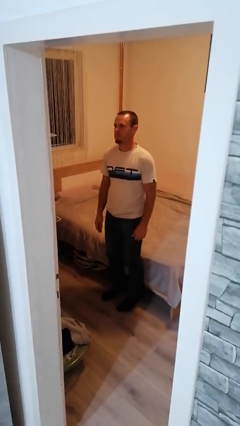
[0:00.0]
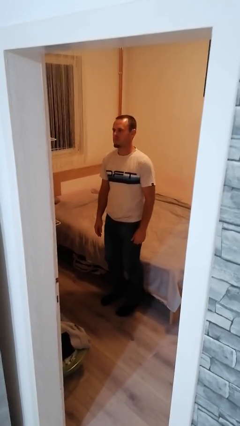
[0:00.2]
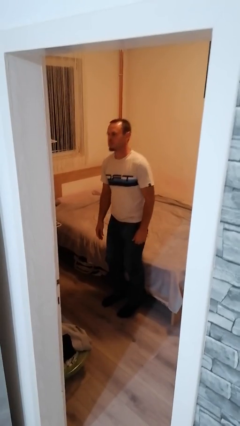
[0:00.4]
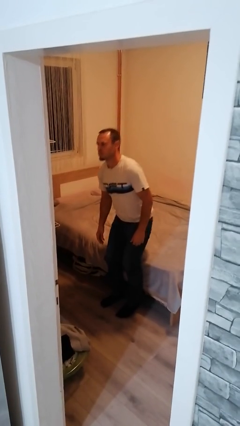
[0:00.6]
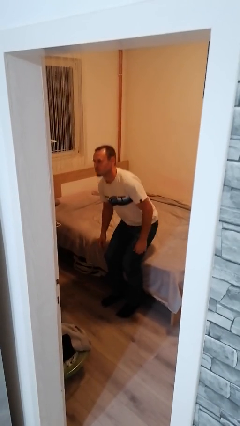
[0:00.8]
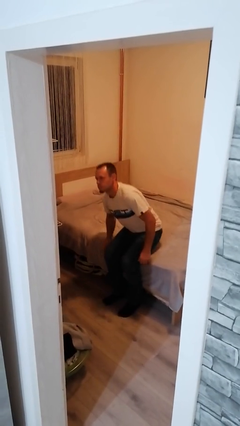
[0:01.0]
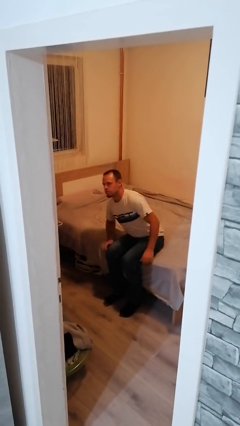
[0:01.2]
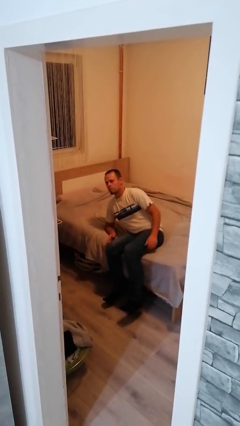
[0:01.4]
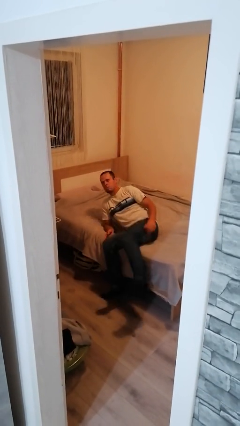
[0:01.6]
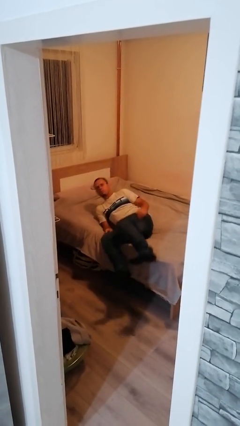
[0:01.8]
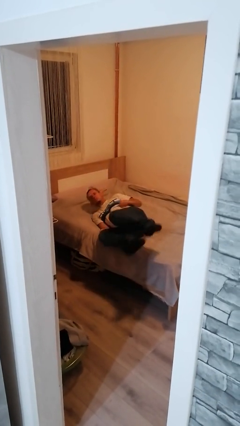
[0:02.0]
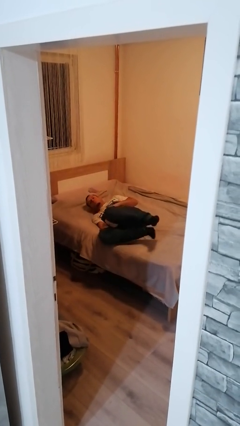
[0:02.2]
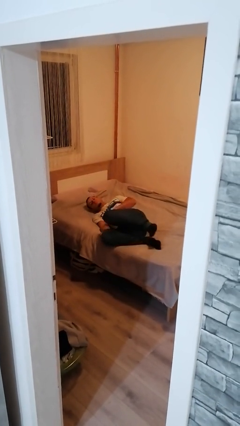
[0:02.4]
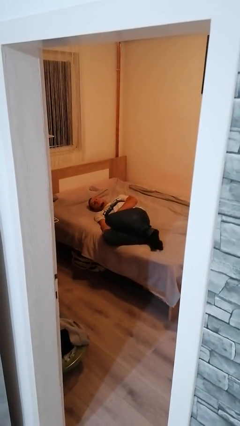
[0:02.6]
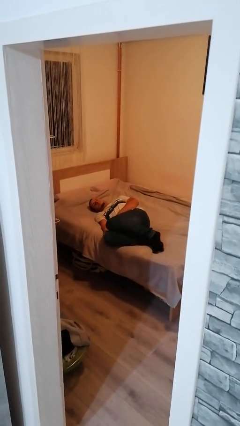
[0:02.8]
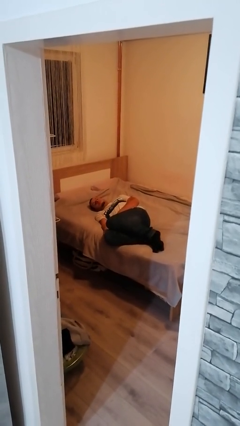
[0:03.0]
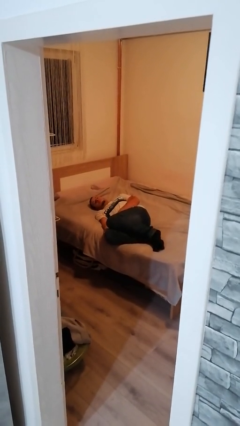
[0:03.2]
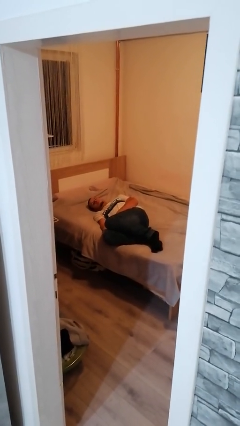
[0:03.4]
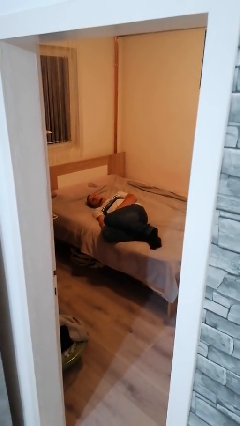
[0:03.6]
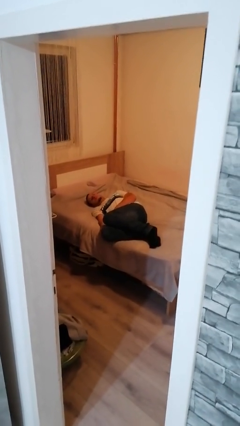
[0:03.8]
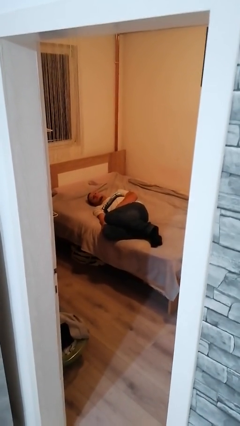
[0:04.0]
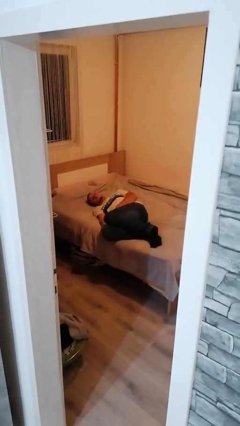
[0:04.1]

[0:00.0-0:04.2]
person lies down on bed

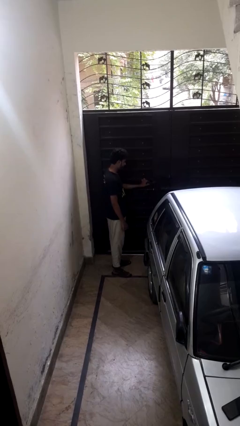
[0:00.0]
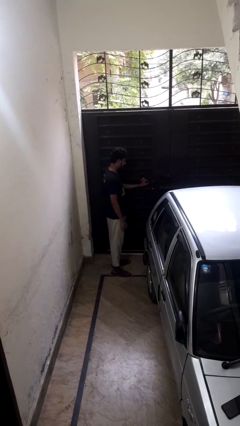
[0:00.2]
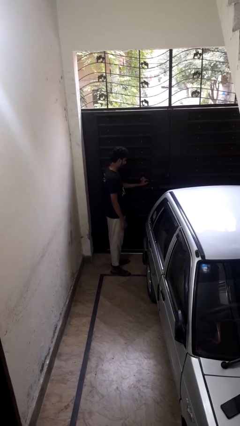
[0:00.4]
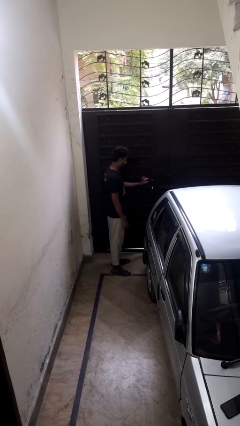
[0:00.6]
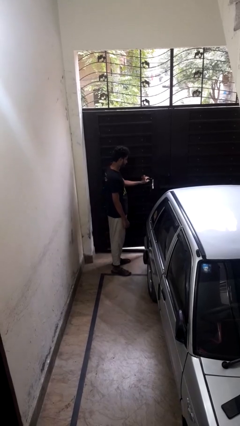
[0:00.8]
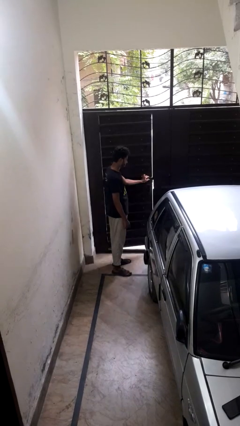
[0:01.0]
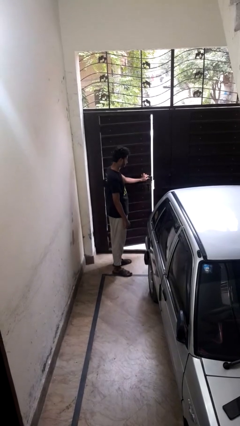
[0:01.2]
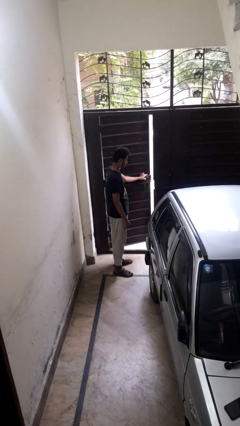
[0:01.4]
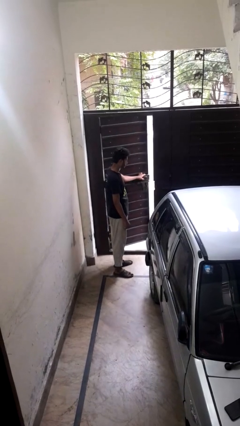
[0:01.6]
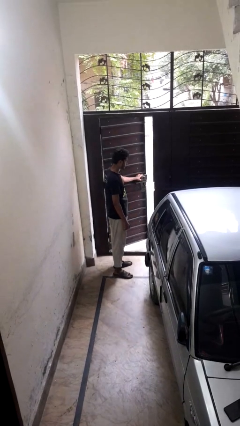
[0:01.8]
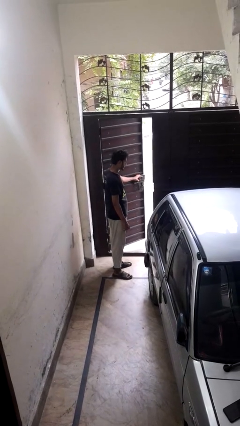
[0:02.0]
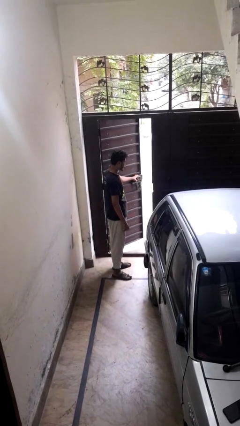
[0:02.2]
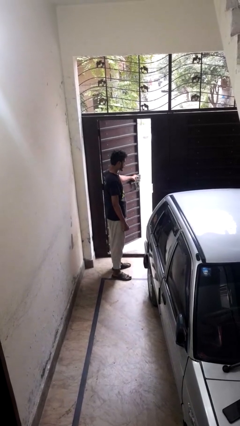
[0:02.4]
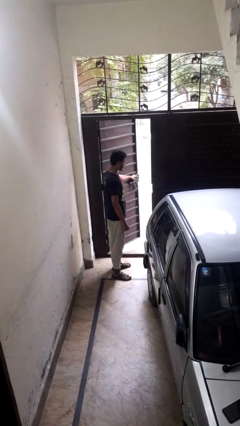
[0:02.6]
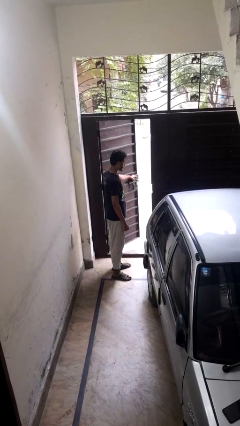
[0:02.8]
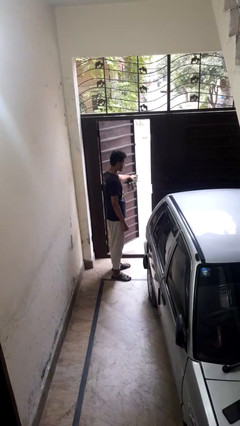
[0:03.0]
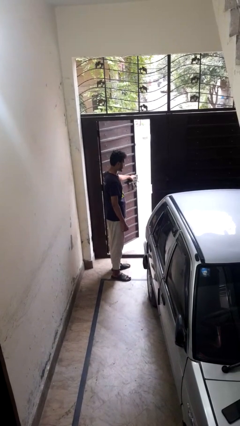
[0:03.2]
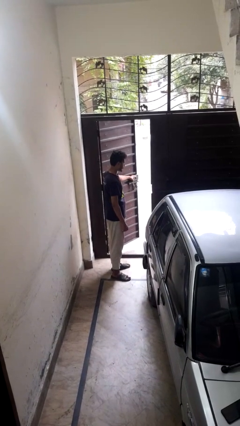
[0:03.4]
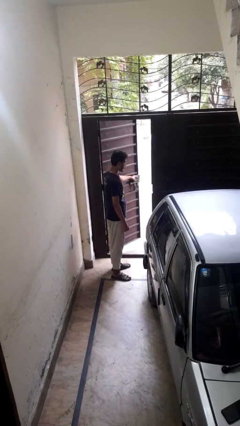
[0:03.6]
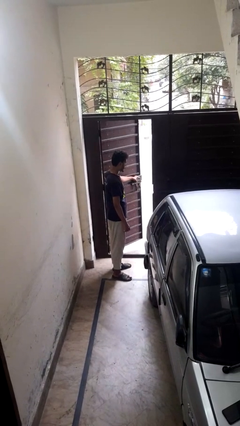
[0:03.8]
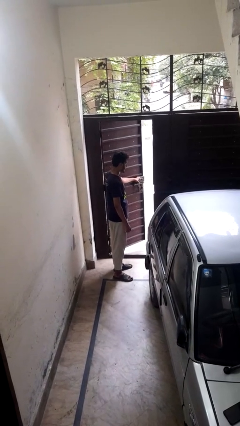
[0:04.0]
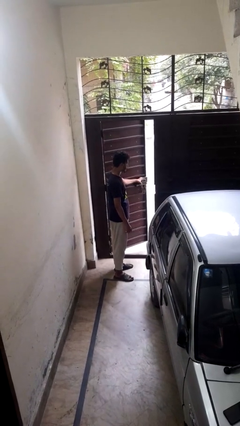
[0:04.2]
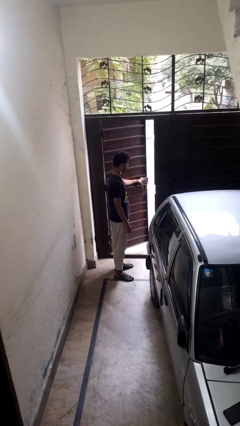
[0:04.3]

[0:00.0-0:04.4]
person opens gate

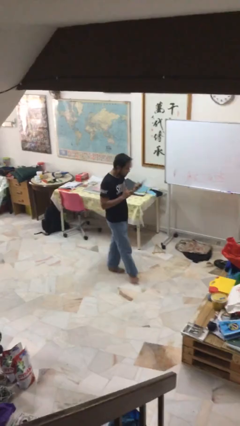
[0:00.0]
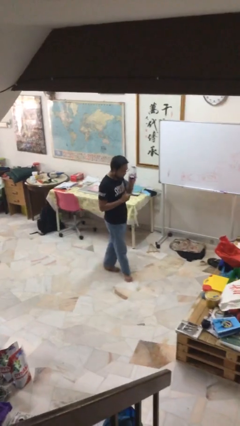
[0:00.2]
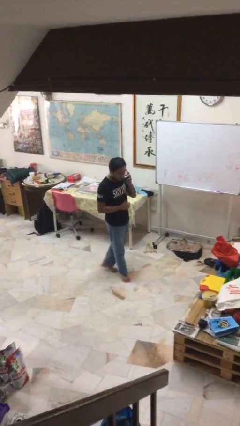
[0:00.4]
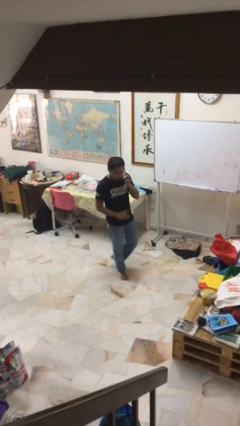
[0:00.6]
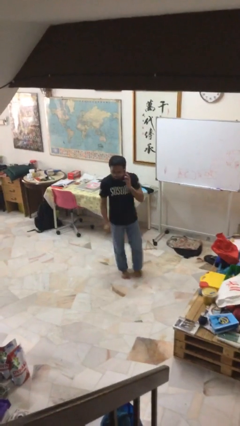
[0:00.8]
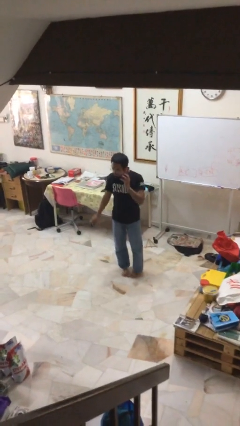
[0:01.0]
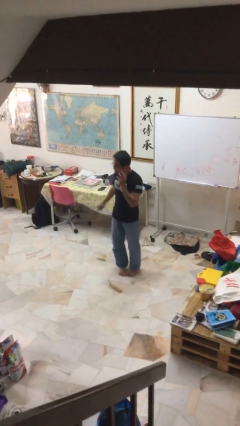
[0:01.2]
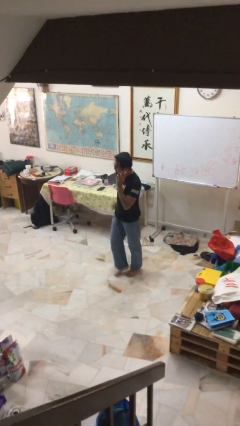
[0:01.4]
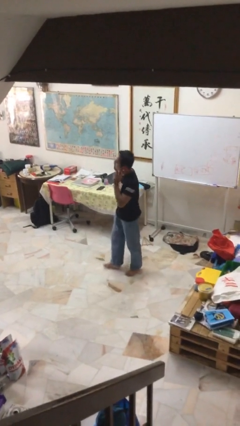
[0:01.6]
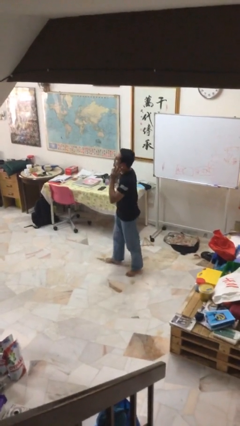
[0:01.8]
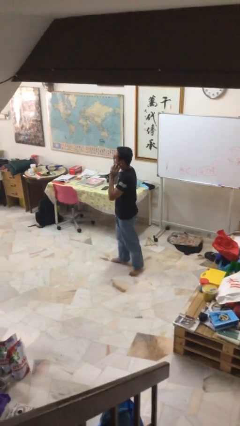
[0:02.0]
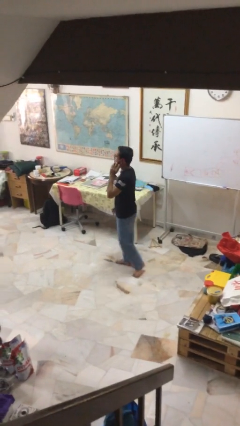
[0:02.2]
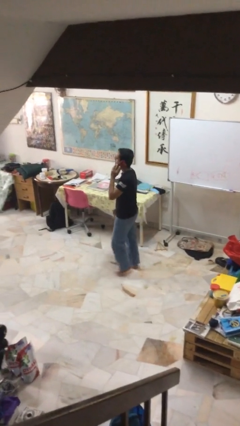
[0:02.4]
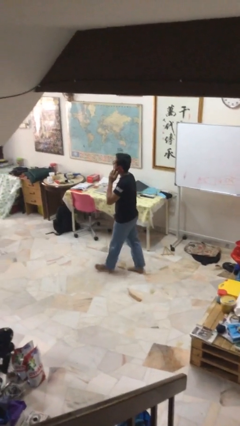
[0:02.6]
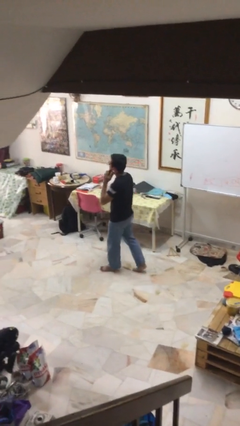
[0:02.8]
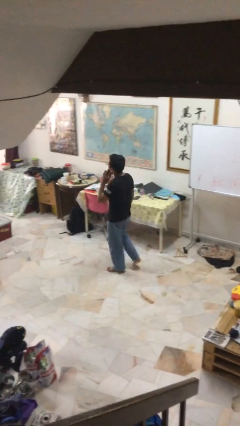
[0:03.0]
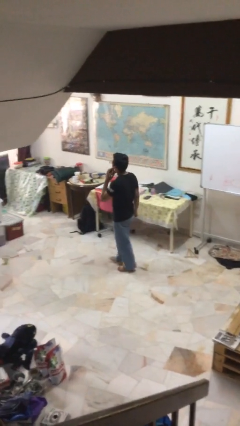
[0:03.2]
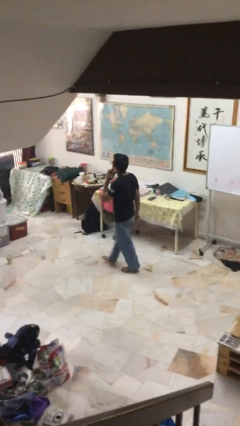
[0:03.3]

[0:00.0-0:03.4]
person talks on phone

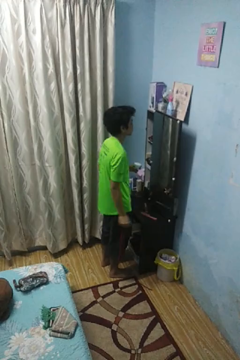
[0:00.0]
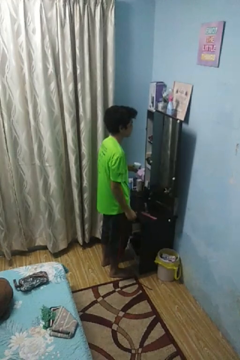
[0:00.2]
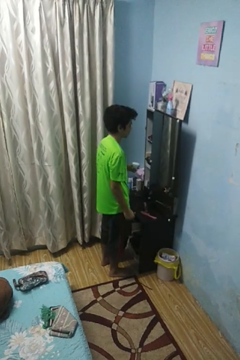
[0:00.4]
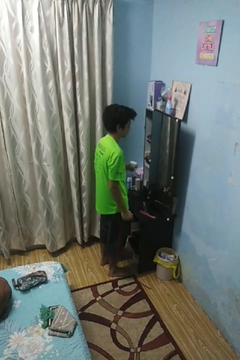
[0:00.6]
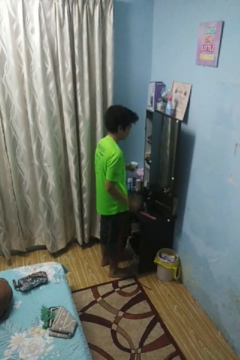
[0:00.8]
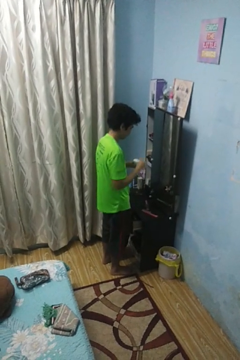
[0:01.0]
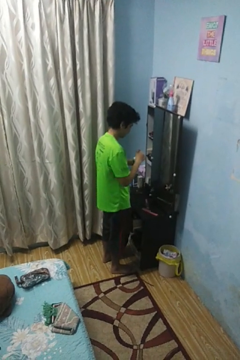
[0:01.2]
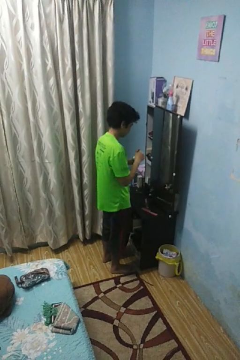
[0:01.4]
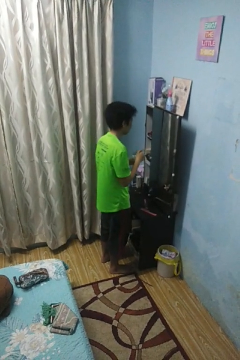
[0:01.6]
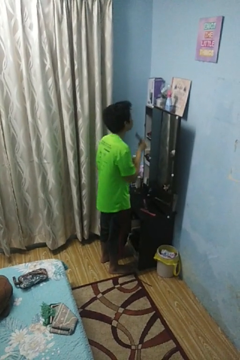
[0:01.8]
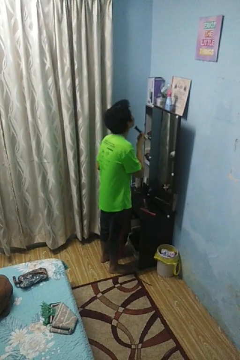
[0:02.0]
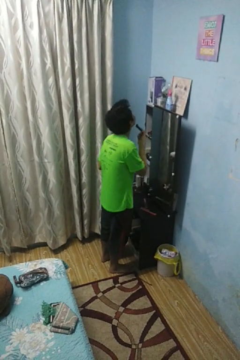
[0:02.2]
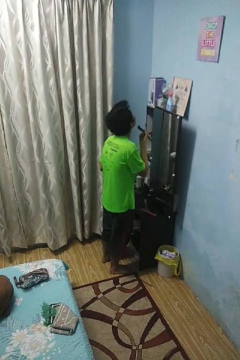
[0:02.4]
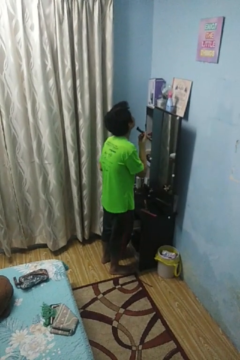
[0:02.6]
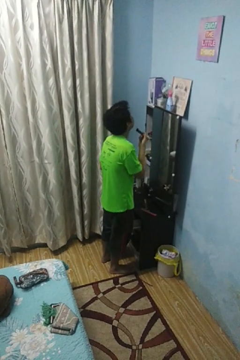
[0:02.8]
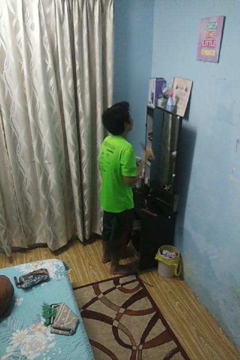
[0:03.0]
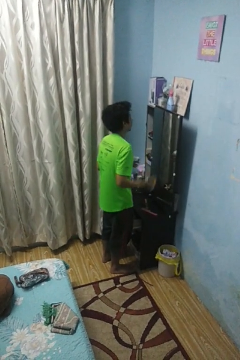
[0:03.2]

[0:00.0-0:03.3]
person applies foundation makeup

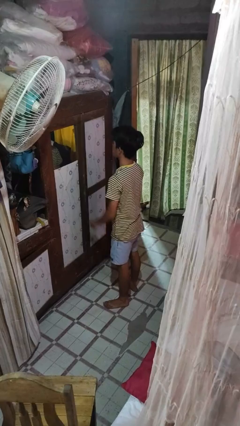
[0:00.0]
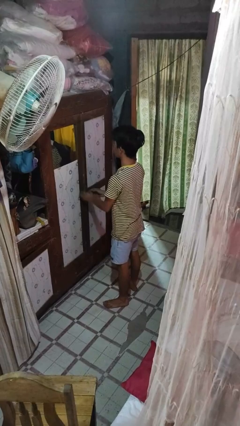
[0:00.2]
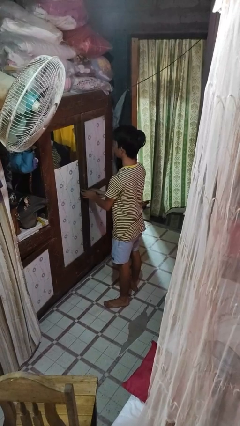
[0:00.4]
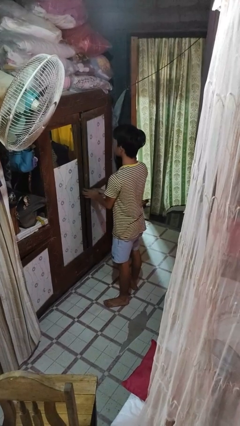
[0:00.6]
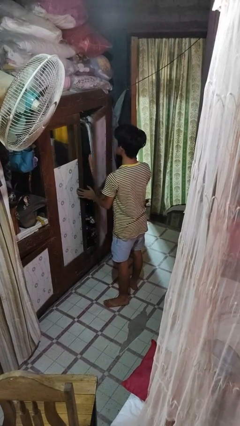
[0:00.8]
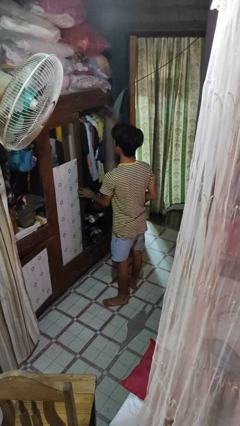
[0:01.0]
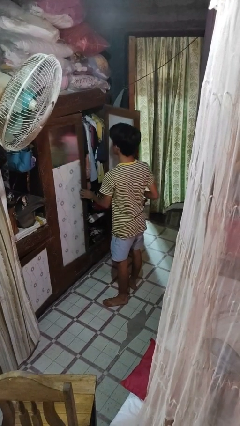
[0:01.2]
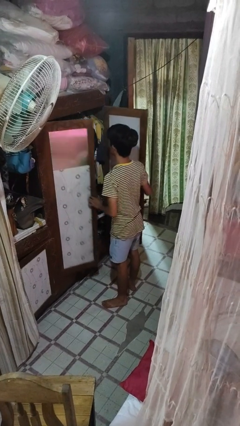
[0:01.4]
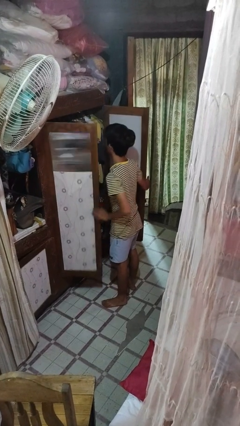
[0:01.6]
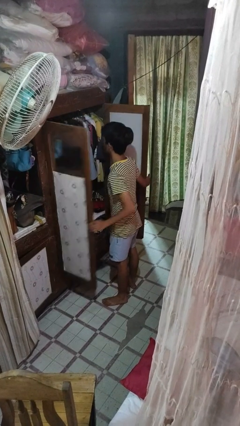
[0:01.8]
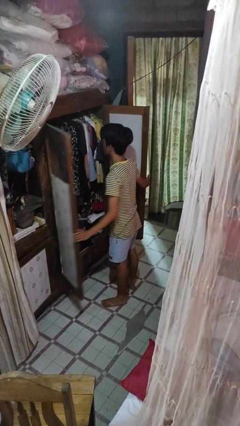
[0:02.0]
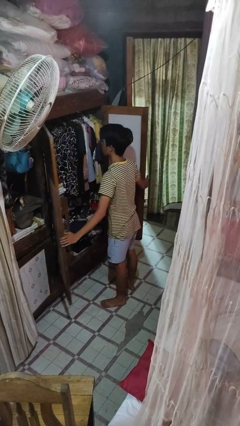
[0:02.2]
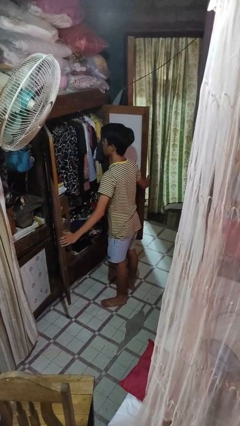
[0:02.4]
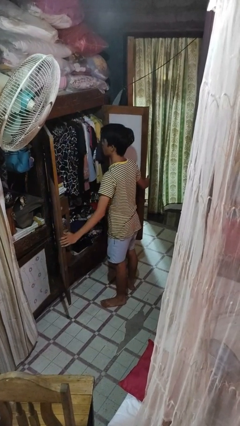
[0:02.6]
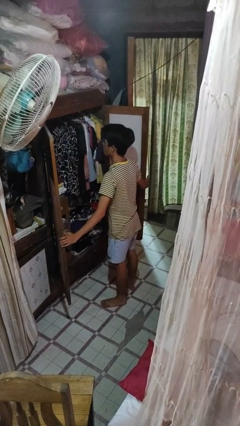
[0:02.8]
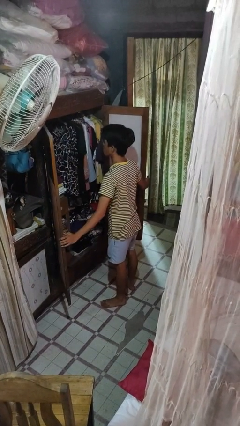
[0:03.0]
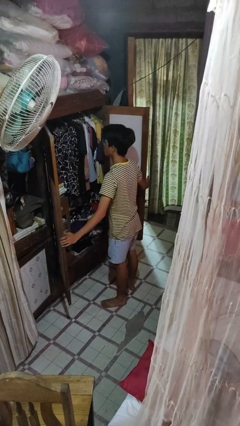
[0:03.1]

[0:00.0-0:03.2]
person opens closet door
